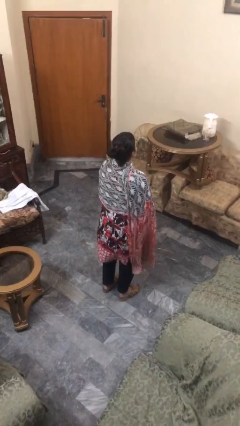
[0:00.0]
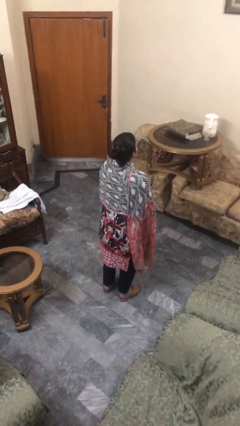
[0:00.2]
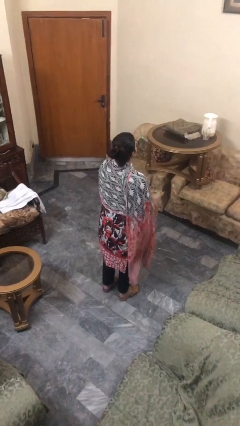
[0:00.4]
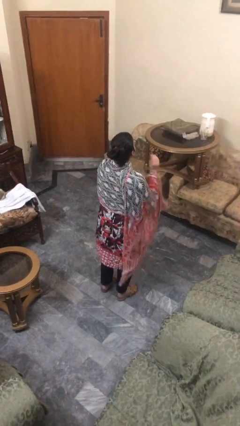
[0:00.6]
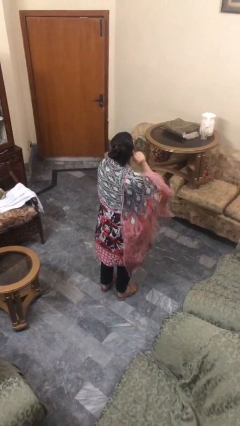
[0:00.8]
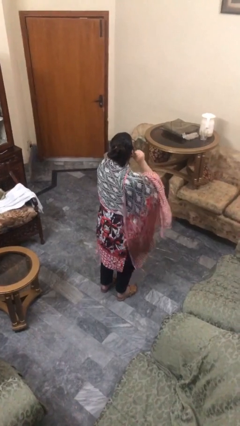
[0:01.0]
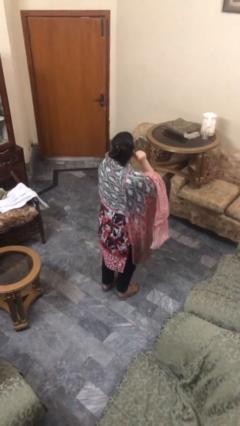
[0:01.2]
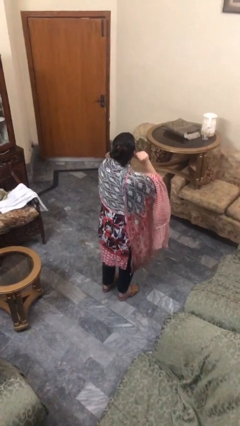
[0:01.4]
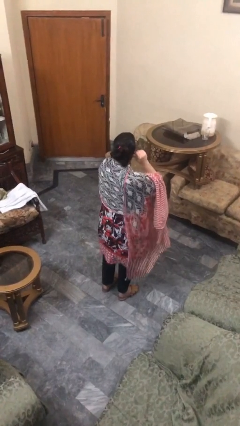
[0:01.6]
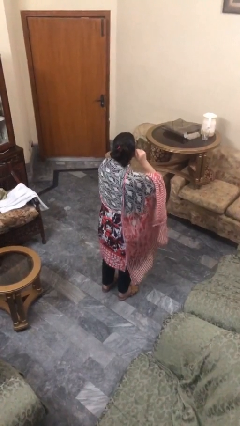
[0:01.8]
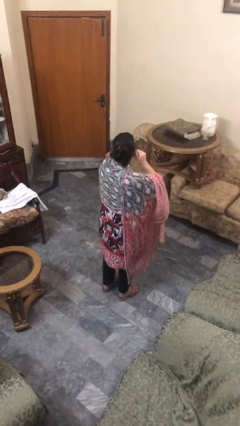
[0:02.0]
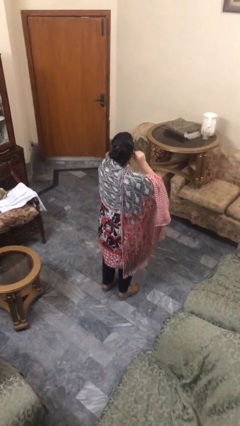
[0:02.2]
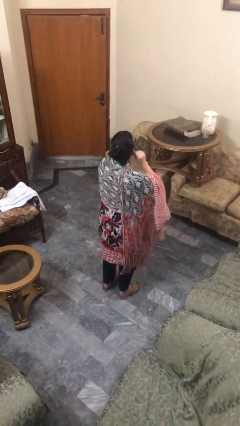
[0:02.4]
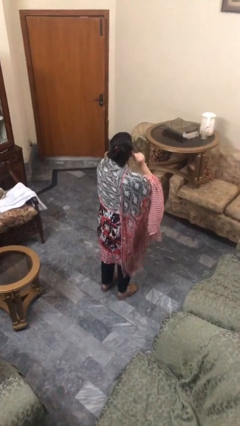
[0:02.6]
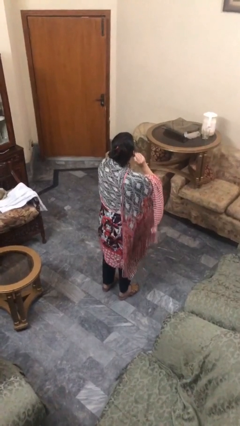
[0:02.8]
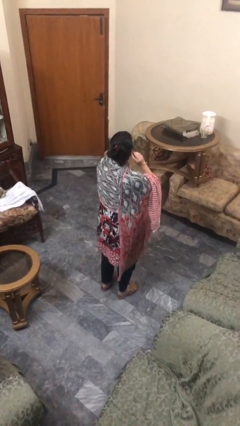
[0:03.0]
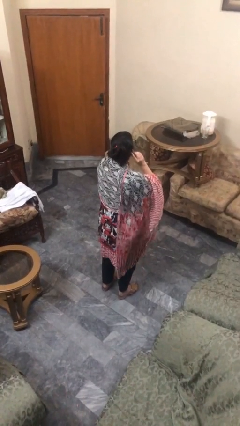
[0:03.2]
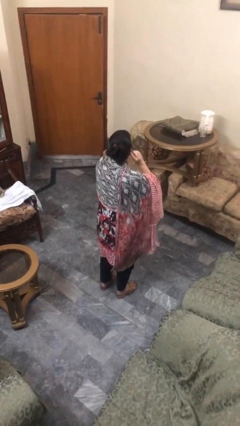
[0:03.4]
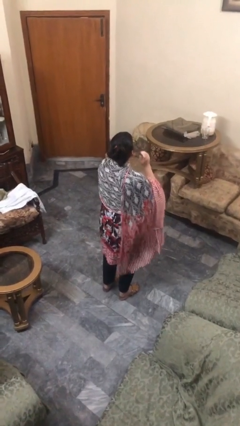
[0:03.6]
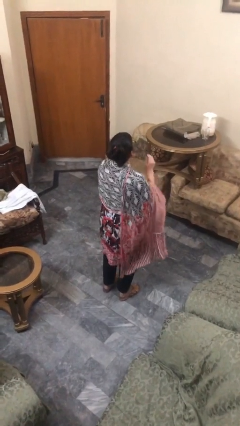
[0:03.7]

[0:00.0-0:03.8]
person touches earlobe

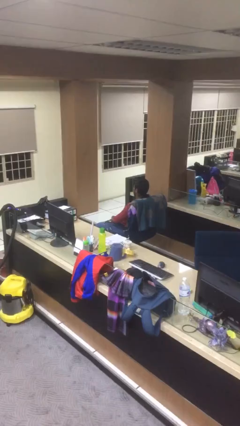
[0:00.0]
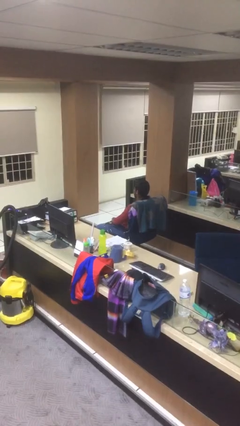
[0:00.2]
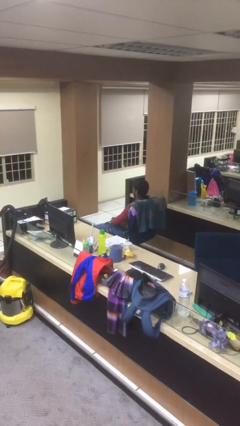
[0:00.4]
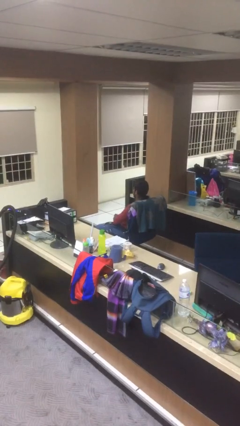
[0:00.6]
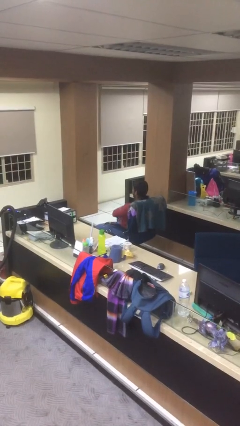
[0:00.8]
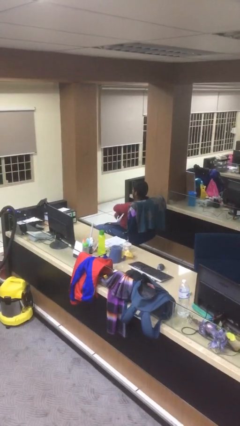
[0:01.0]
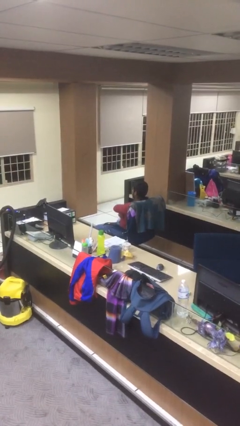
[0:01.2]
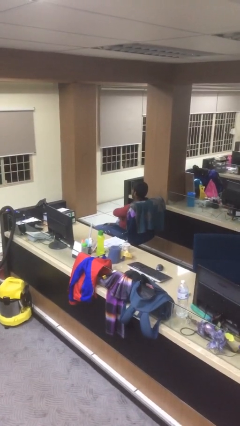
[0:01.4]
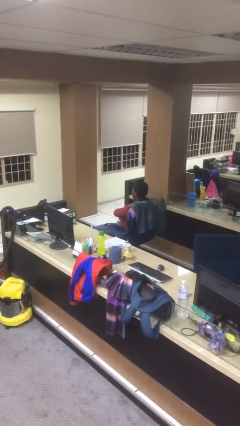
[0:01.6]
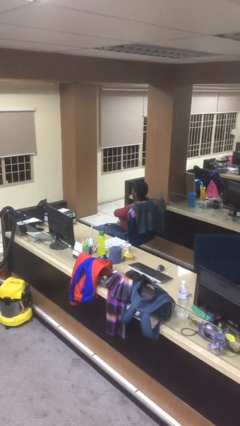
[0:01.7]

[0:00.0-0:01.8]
person crosses arms

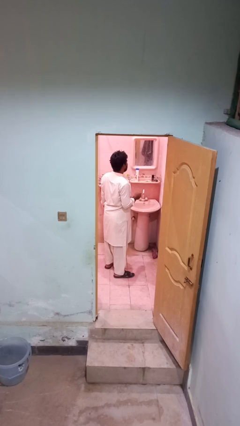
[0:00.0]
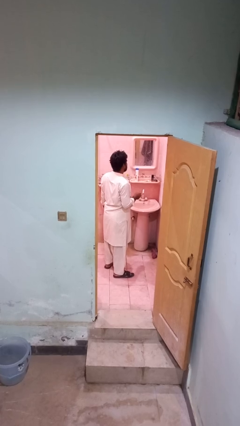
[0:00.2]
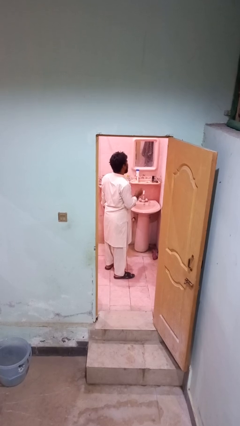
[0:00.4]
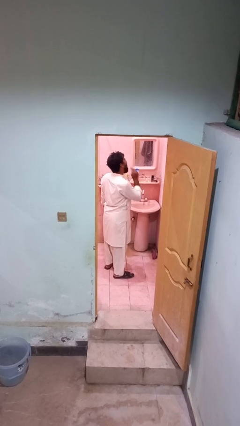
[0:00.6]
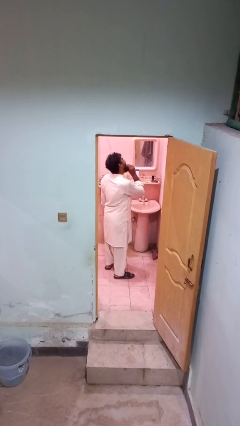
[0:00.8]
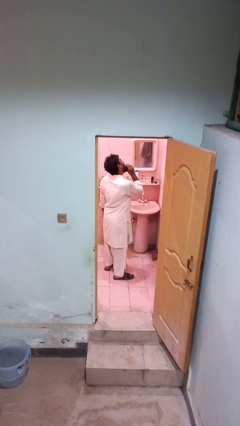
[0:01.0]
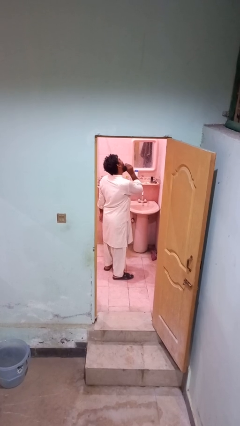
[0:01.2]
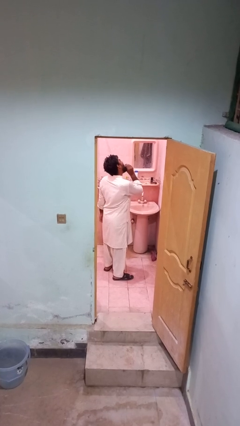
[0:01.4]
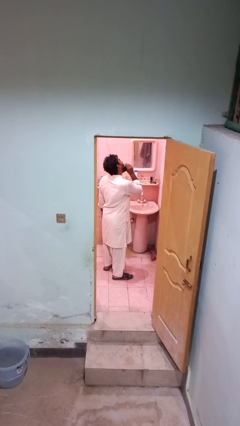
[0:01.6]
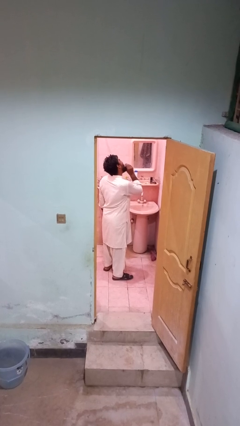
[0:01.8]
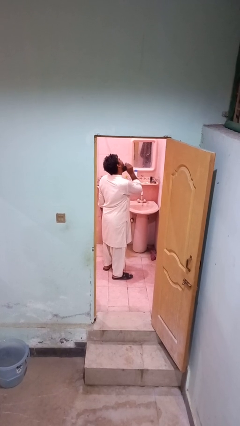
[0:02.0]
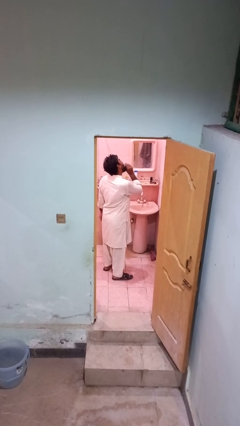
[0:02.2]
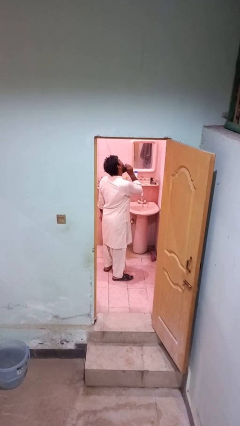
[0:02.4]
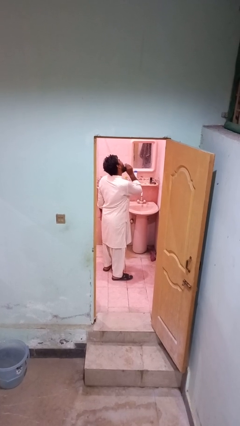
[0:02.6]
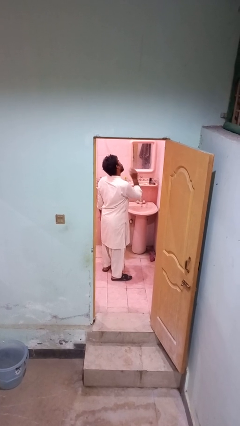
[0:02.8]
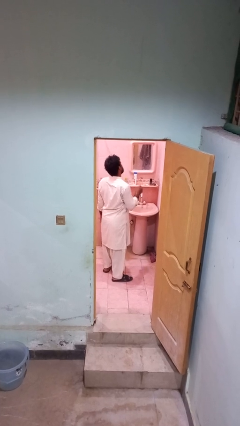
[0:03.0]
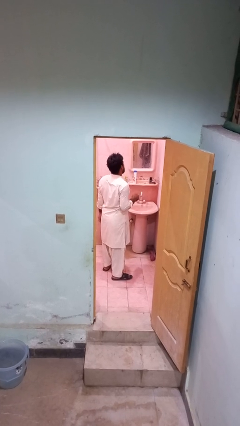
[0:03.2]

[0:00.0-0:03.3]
person flosses

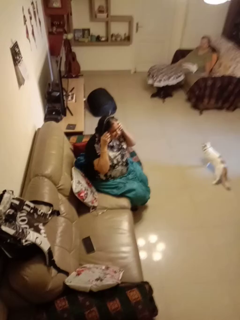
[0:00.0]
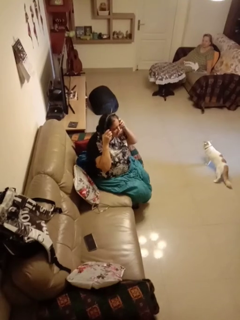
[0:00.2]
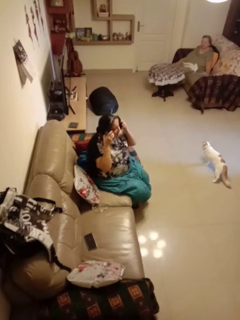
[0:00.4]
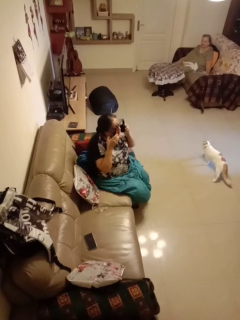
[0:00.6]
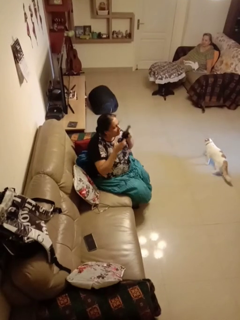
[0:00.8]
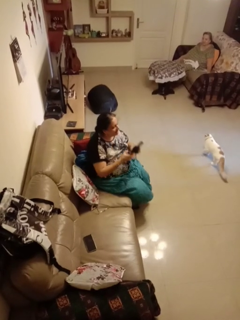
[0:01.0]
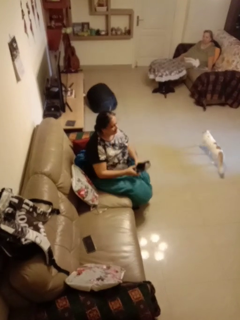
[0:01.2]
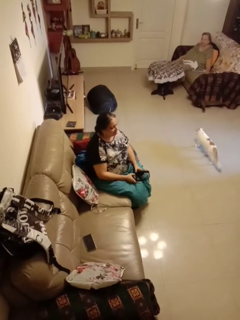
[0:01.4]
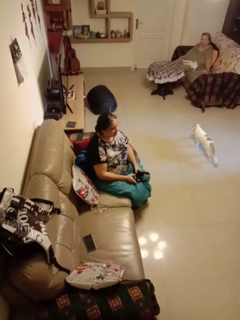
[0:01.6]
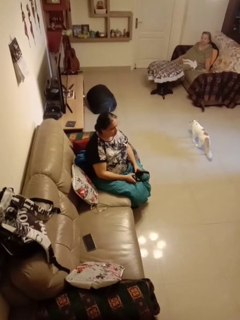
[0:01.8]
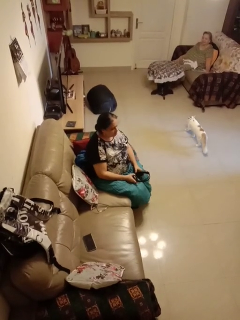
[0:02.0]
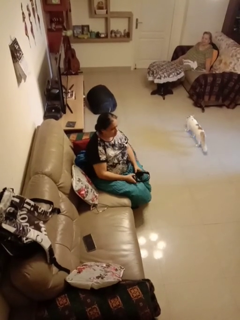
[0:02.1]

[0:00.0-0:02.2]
person takes off headphones

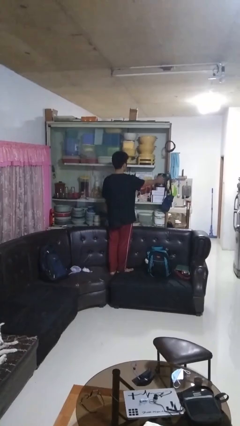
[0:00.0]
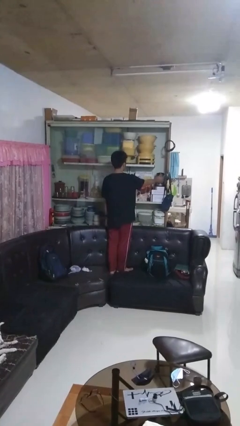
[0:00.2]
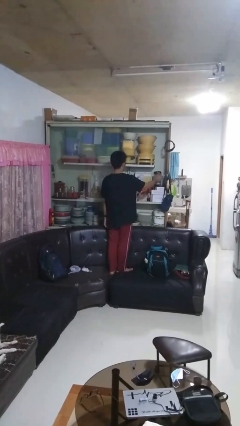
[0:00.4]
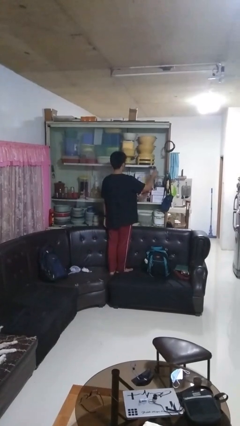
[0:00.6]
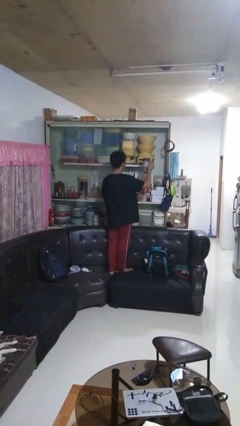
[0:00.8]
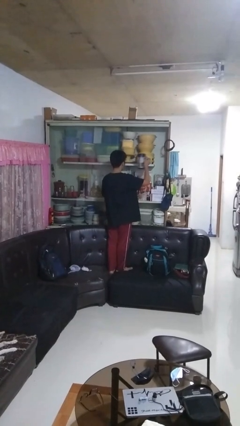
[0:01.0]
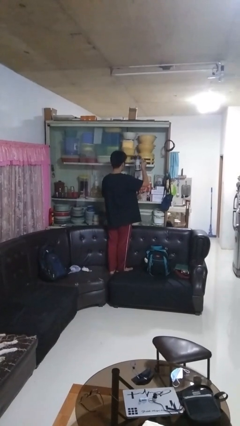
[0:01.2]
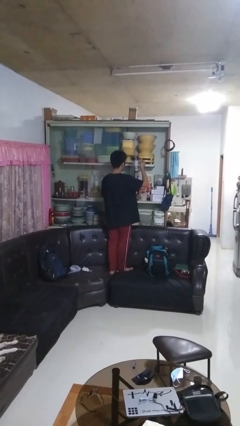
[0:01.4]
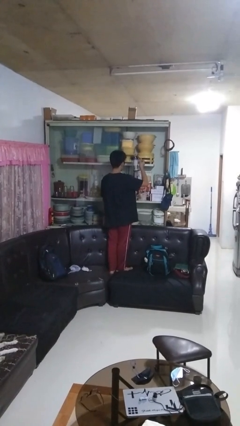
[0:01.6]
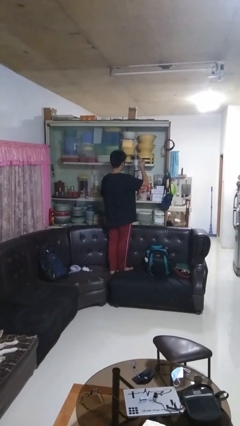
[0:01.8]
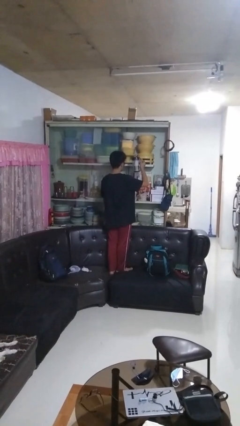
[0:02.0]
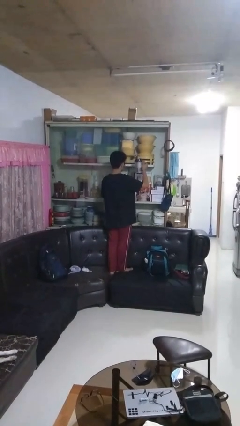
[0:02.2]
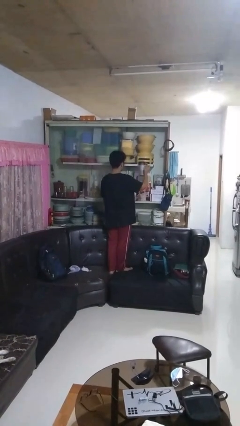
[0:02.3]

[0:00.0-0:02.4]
person picks up object from cabinet

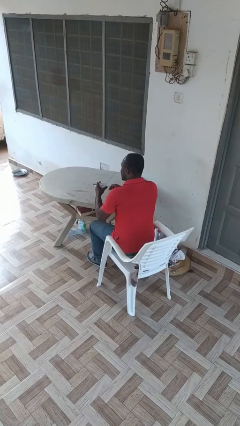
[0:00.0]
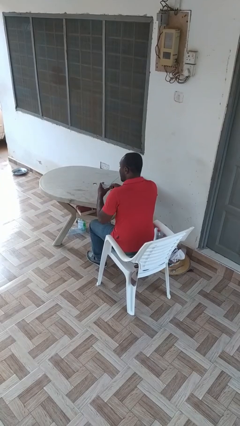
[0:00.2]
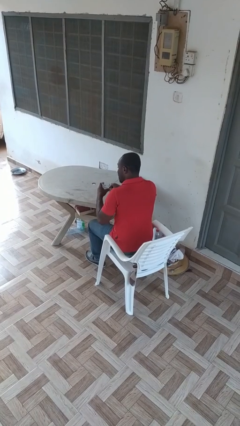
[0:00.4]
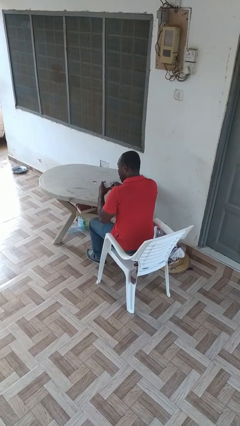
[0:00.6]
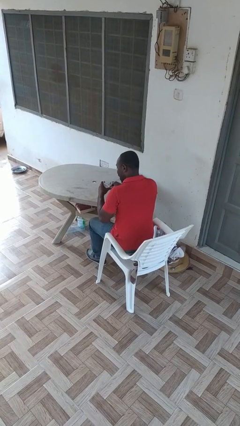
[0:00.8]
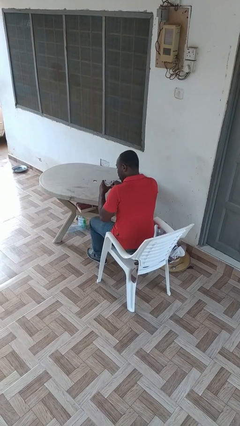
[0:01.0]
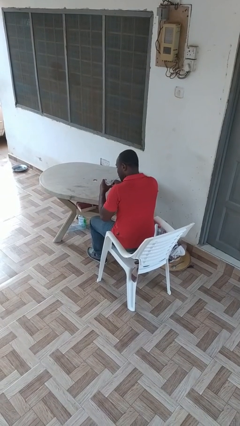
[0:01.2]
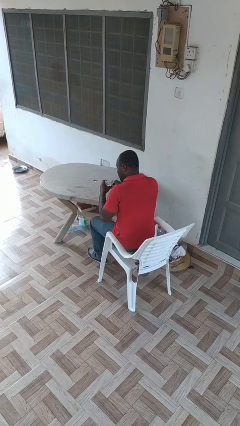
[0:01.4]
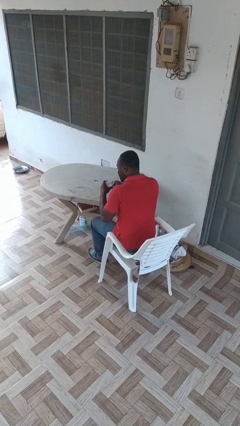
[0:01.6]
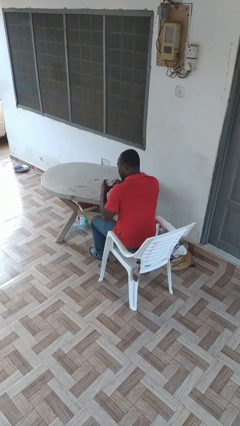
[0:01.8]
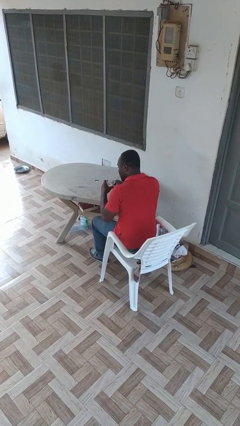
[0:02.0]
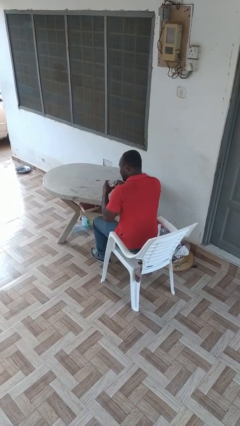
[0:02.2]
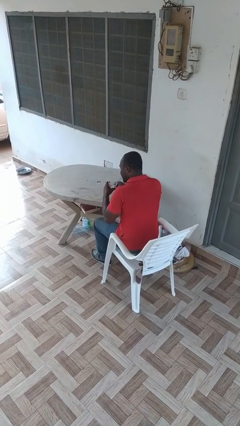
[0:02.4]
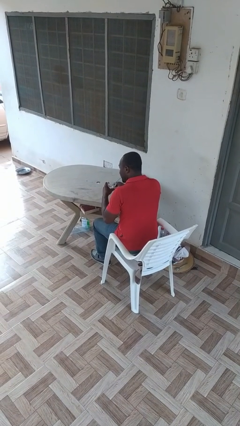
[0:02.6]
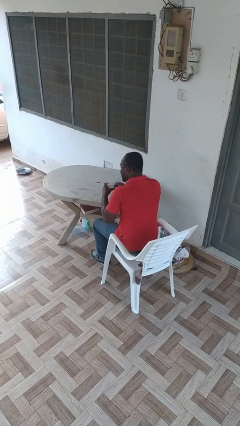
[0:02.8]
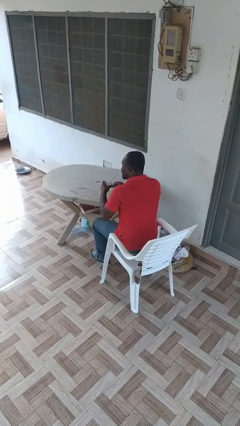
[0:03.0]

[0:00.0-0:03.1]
person drinks from straw

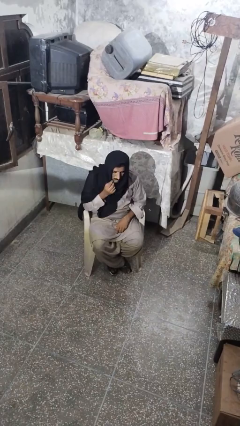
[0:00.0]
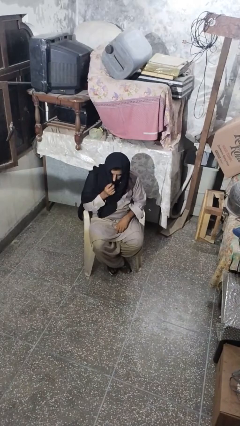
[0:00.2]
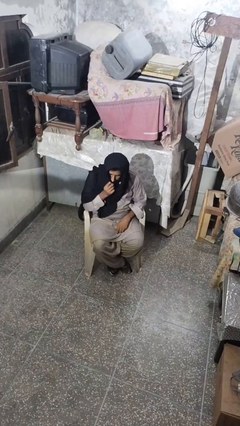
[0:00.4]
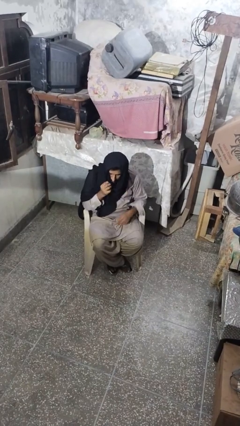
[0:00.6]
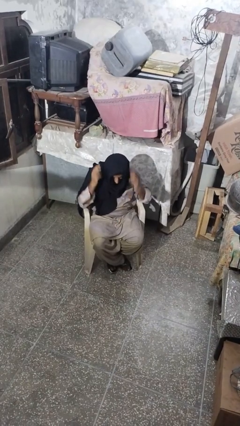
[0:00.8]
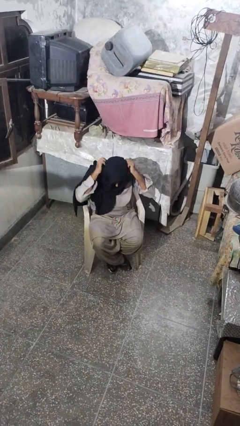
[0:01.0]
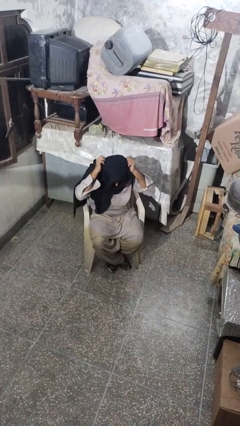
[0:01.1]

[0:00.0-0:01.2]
person takes off scarf
